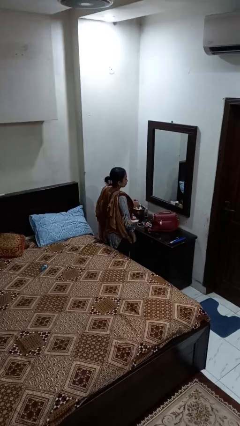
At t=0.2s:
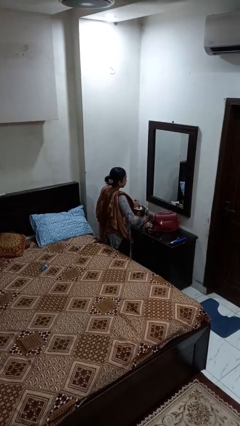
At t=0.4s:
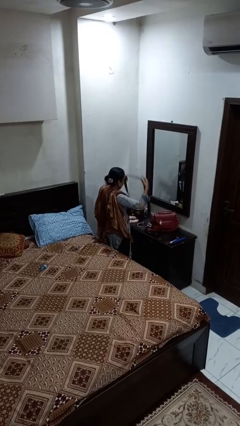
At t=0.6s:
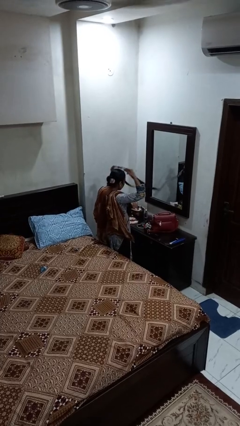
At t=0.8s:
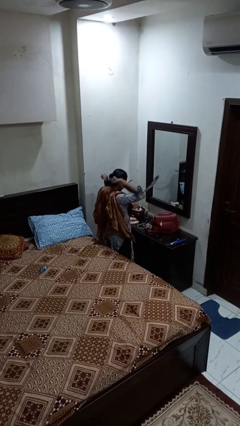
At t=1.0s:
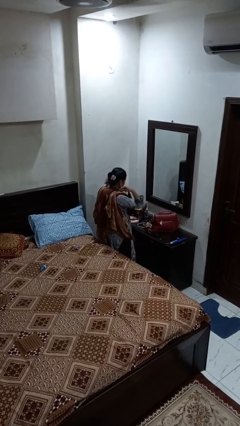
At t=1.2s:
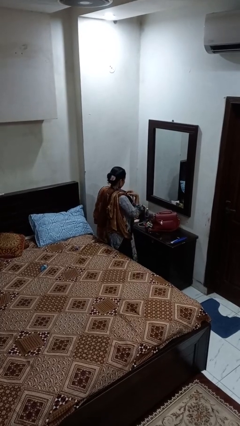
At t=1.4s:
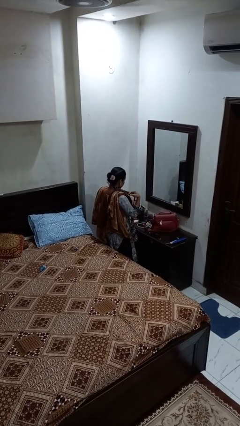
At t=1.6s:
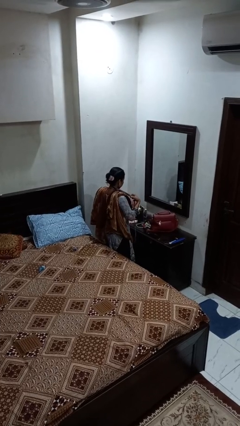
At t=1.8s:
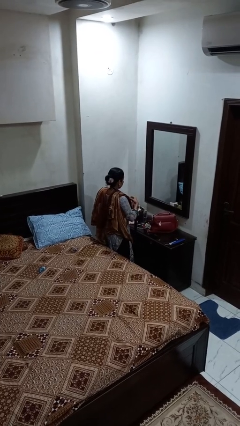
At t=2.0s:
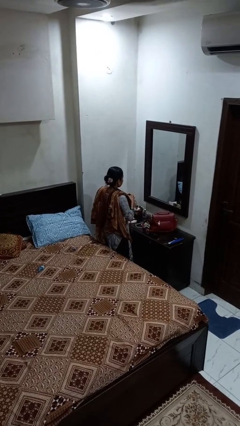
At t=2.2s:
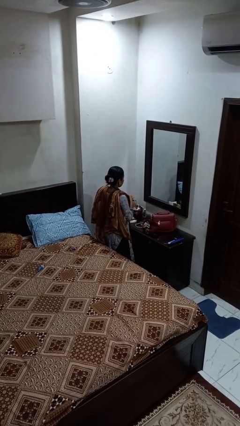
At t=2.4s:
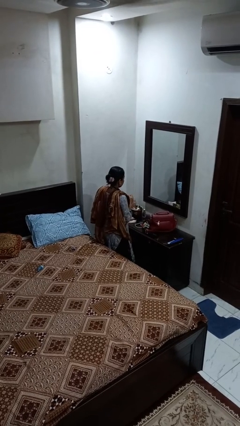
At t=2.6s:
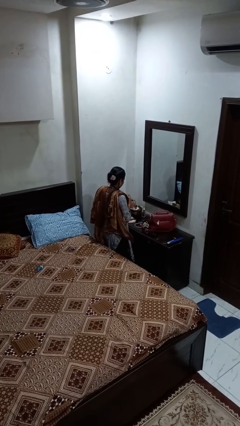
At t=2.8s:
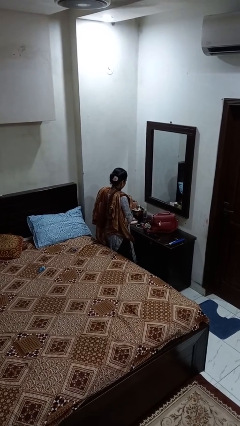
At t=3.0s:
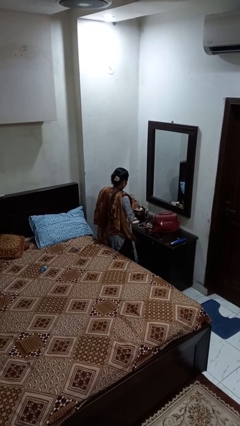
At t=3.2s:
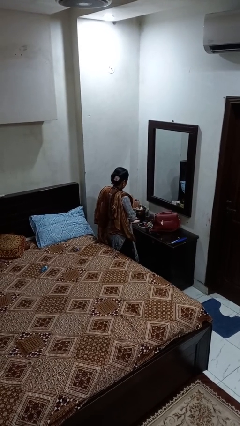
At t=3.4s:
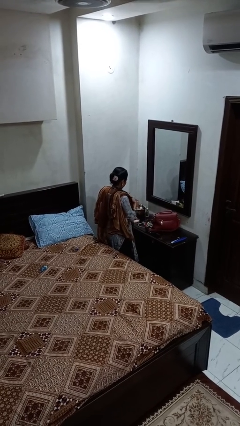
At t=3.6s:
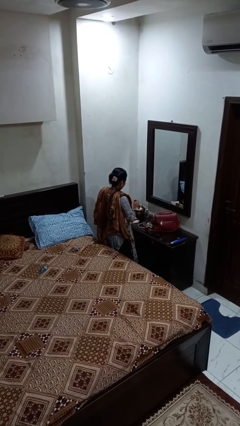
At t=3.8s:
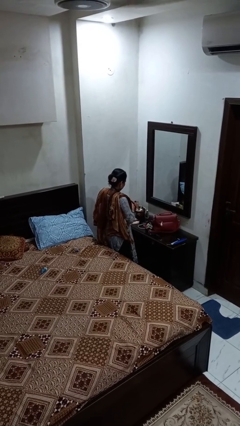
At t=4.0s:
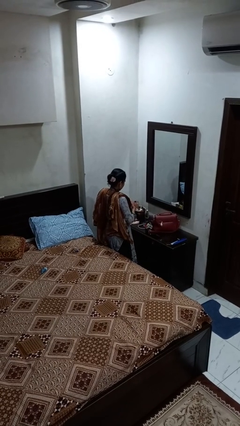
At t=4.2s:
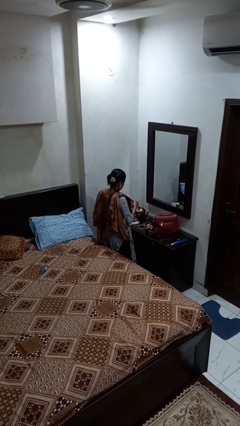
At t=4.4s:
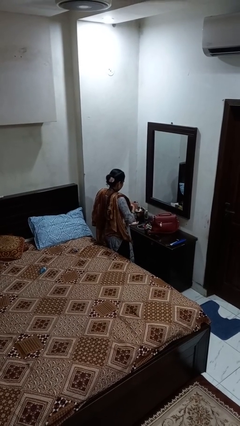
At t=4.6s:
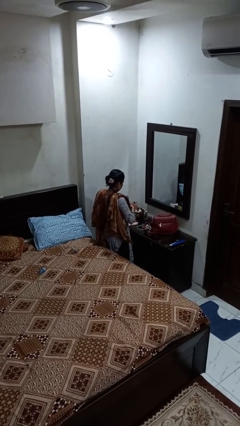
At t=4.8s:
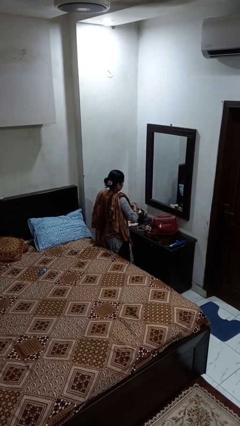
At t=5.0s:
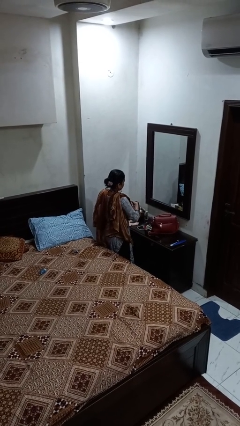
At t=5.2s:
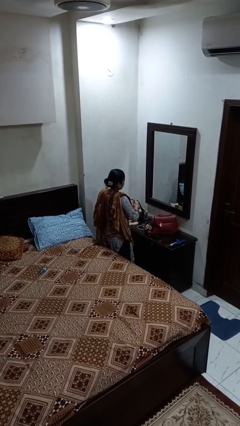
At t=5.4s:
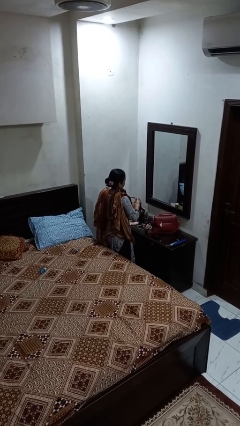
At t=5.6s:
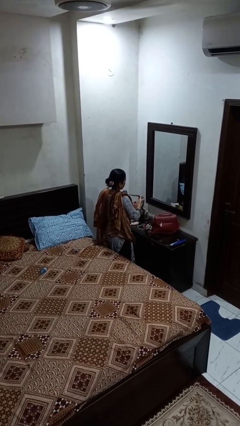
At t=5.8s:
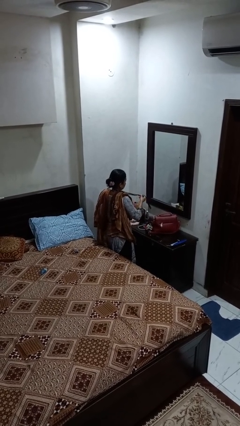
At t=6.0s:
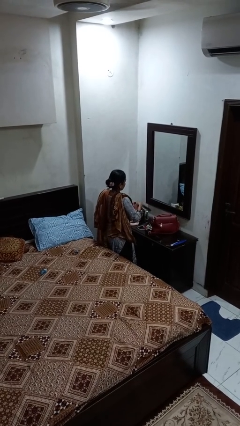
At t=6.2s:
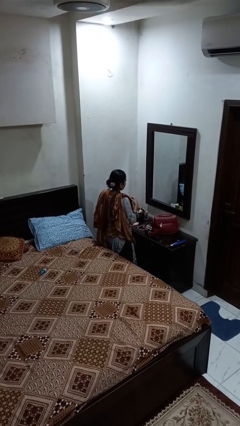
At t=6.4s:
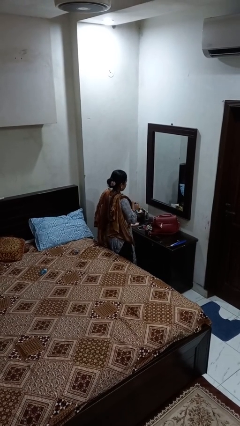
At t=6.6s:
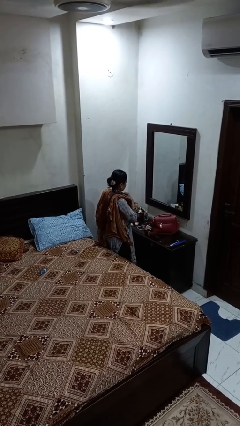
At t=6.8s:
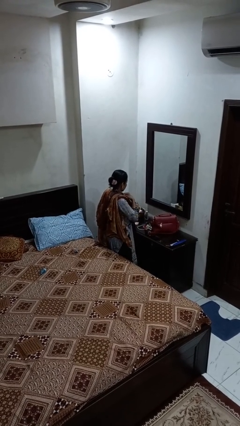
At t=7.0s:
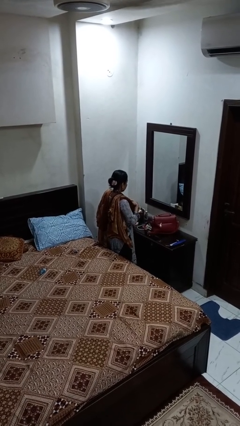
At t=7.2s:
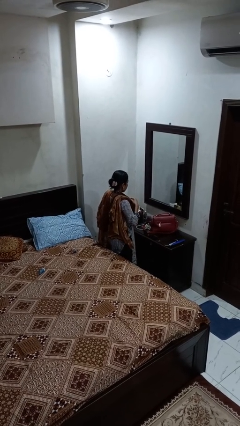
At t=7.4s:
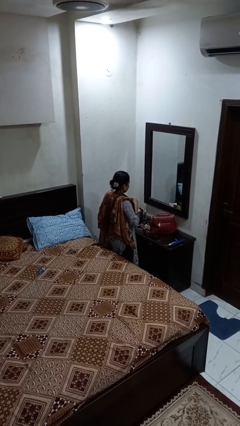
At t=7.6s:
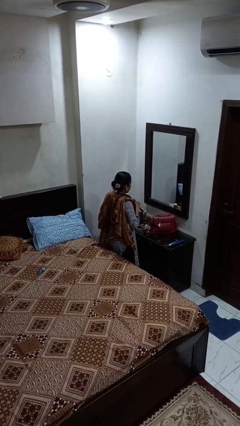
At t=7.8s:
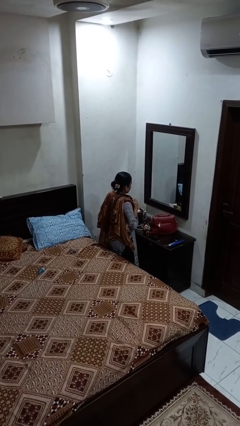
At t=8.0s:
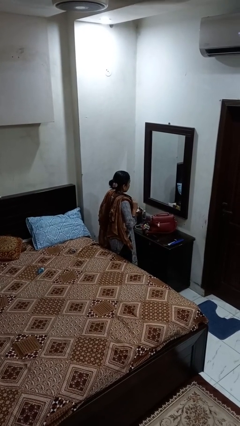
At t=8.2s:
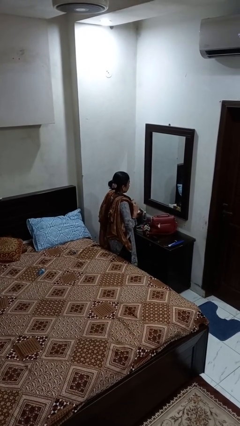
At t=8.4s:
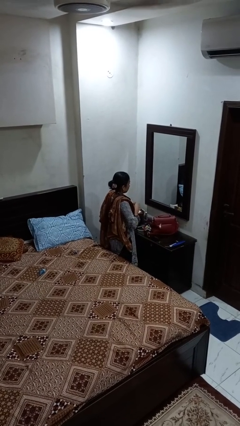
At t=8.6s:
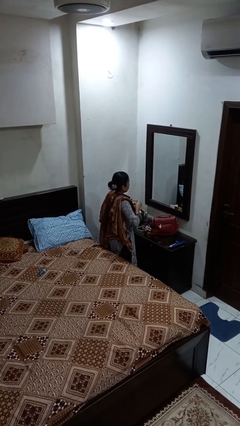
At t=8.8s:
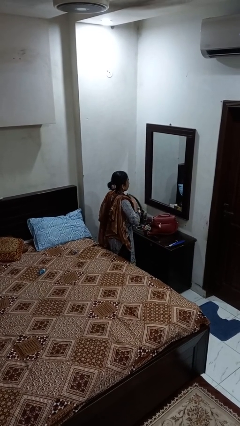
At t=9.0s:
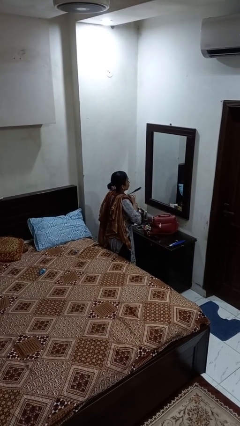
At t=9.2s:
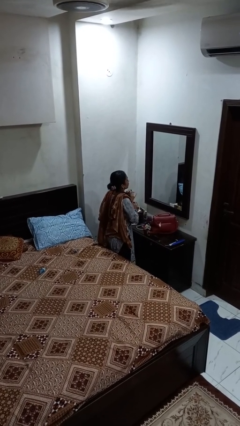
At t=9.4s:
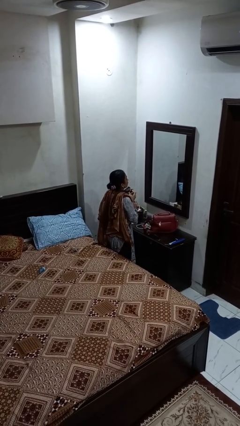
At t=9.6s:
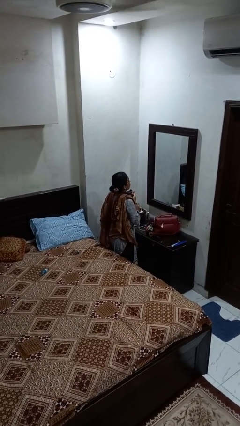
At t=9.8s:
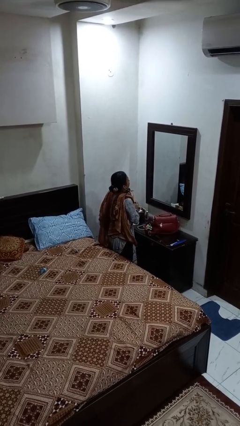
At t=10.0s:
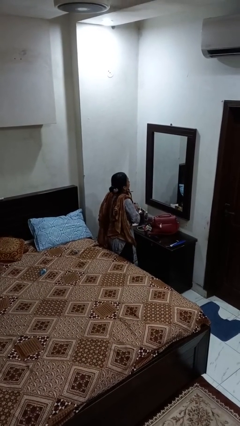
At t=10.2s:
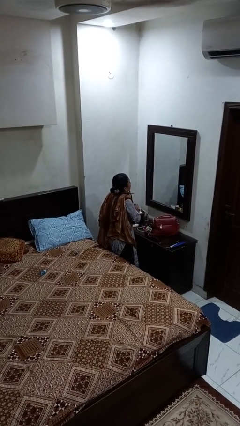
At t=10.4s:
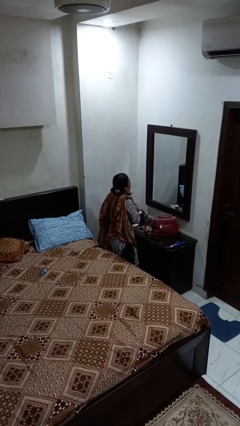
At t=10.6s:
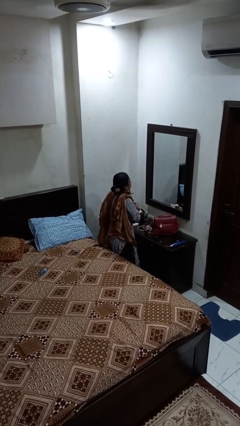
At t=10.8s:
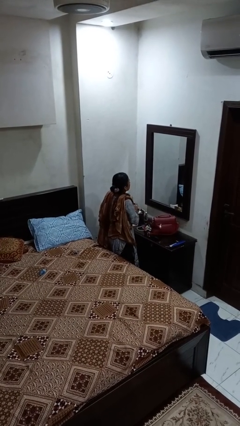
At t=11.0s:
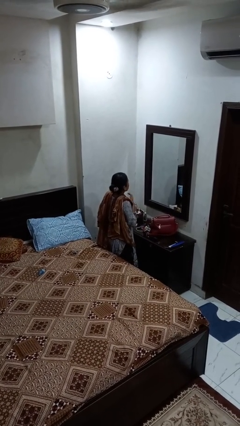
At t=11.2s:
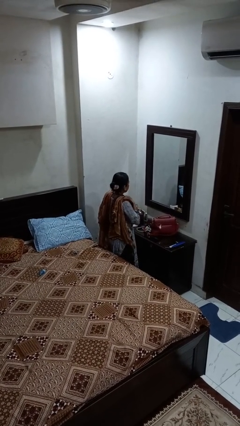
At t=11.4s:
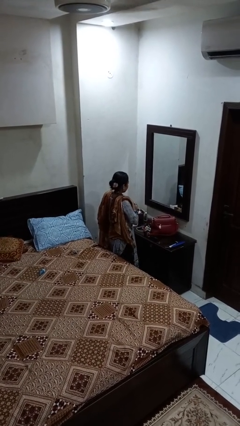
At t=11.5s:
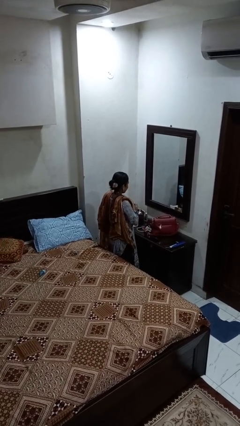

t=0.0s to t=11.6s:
person puts on necktie

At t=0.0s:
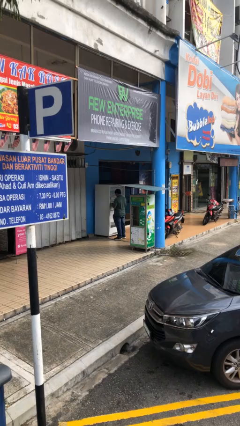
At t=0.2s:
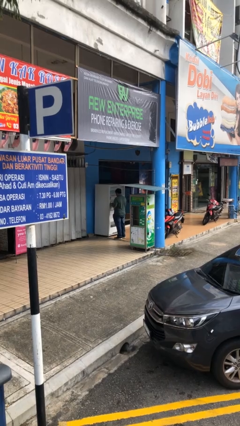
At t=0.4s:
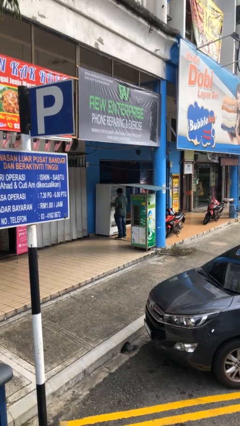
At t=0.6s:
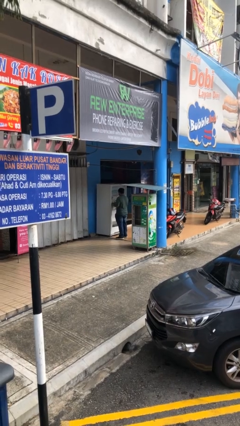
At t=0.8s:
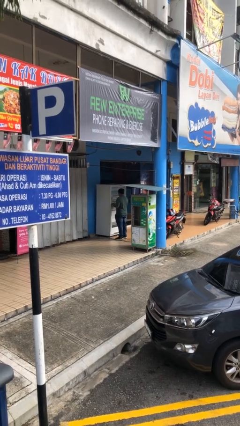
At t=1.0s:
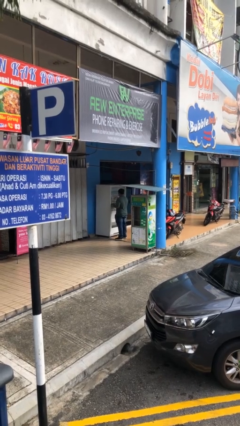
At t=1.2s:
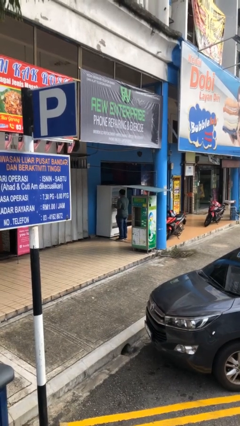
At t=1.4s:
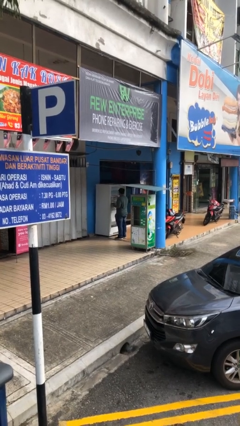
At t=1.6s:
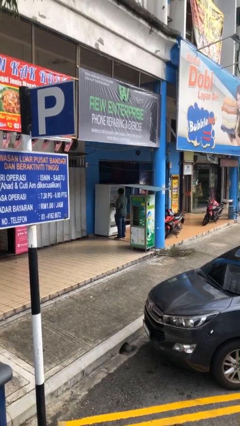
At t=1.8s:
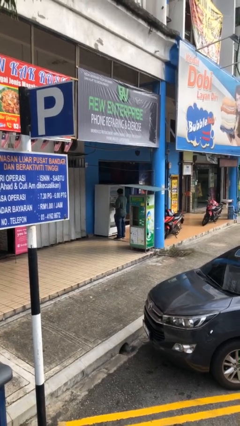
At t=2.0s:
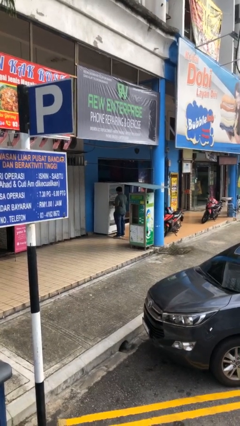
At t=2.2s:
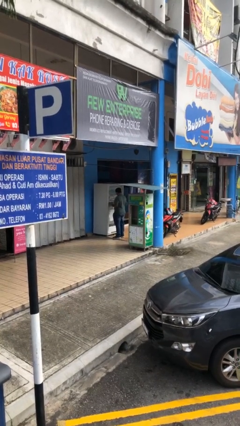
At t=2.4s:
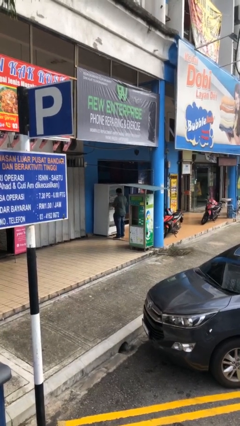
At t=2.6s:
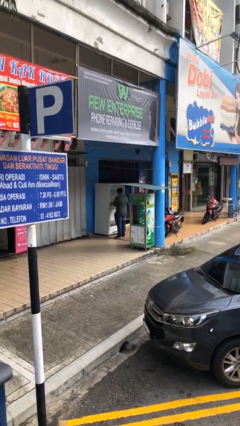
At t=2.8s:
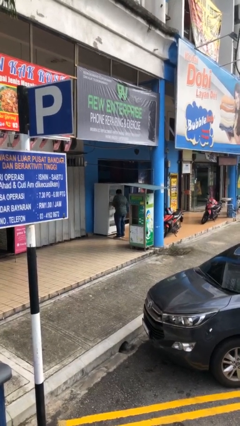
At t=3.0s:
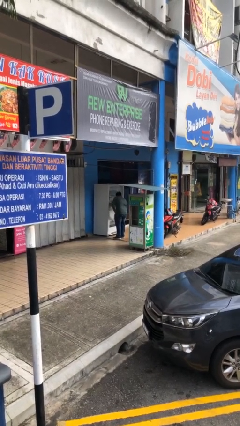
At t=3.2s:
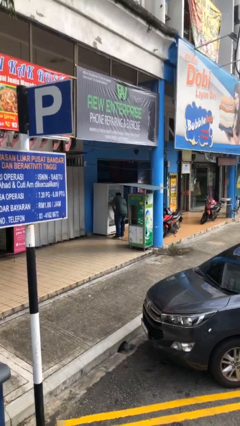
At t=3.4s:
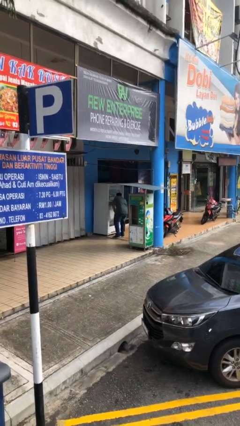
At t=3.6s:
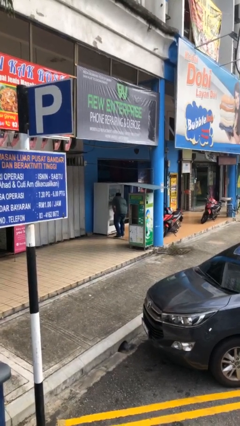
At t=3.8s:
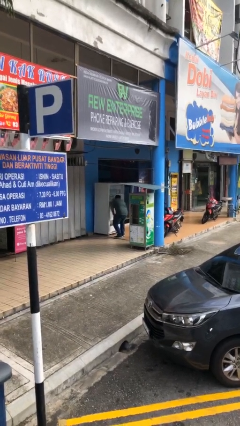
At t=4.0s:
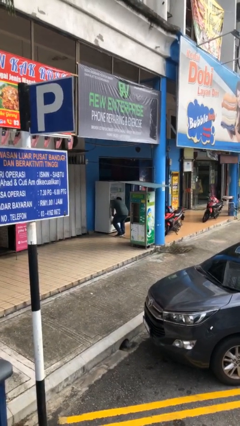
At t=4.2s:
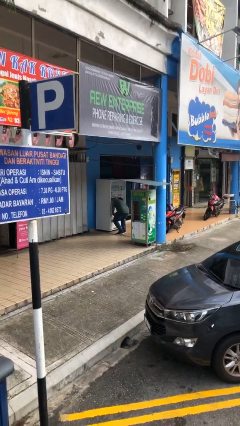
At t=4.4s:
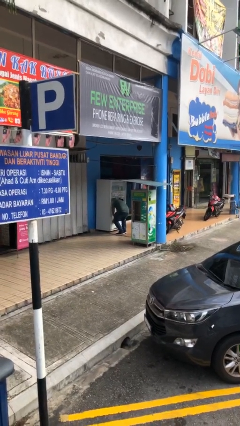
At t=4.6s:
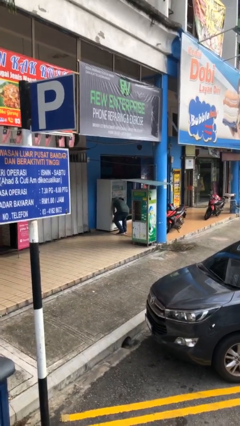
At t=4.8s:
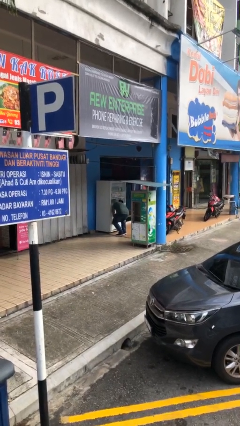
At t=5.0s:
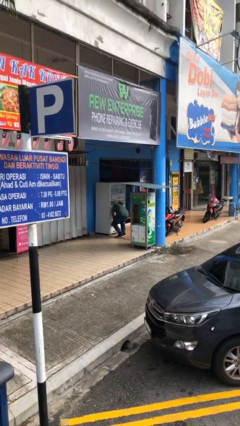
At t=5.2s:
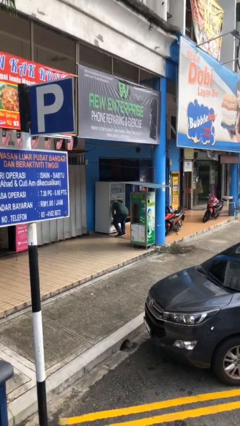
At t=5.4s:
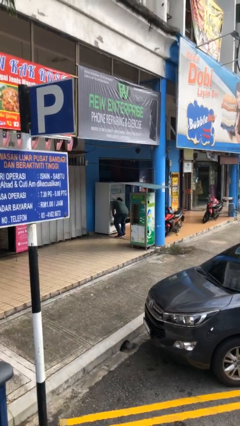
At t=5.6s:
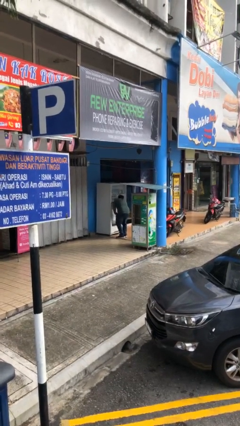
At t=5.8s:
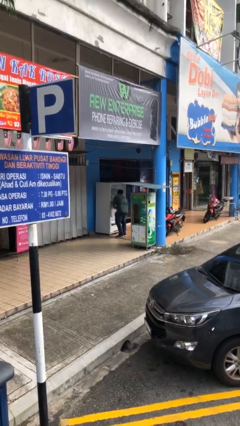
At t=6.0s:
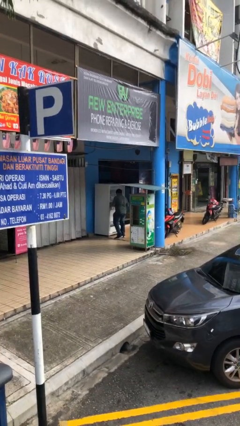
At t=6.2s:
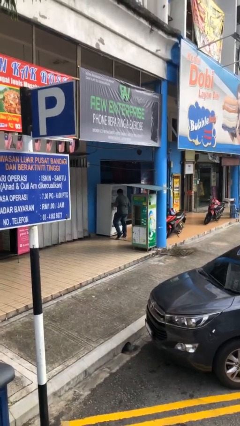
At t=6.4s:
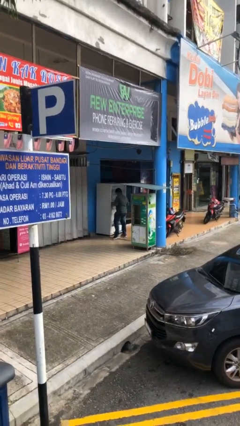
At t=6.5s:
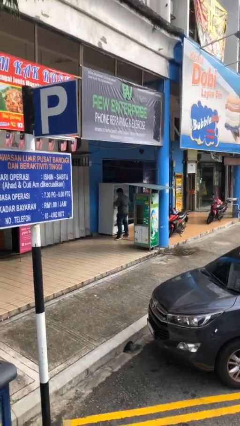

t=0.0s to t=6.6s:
person purchases from machine
